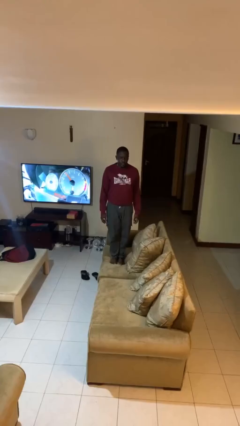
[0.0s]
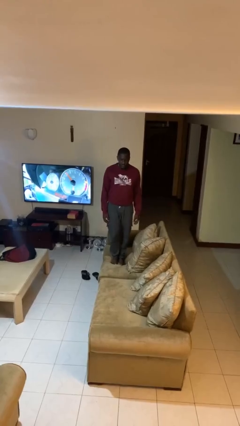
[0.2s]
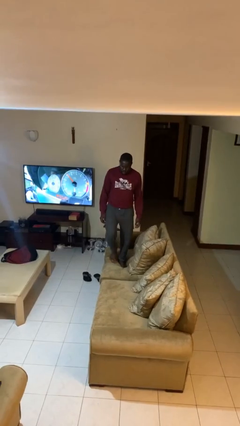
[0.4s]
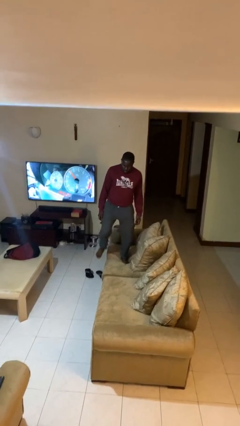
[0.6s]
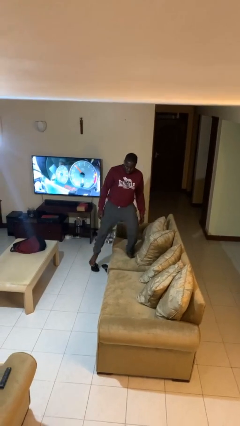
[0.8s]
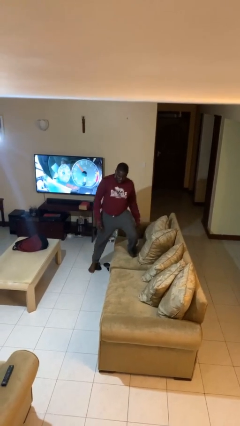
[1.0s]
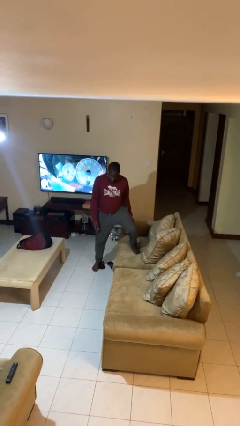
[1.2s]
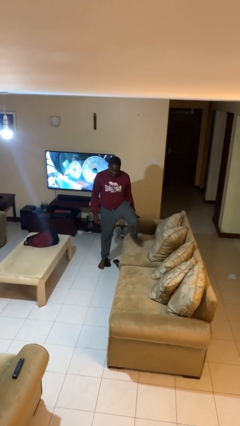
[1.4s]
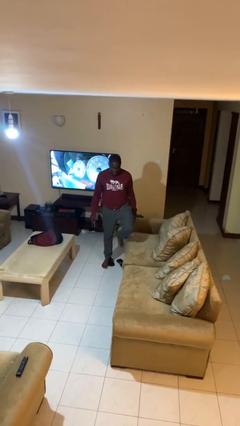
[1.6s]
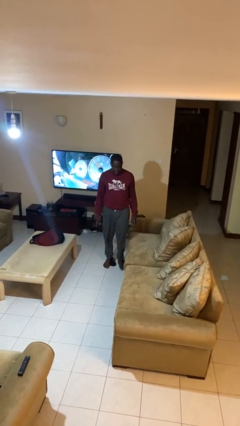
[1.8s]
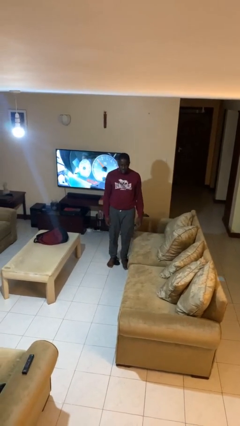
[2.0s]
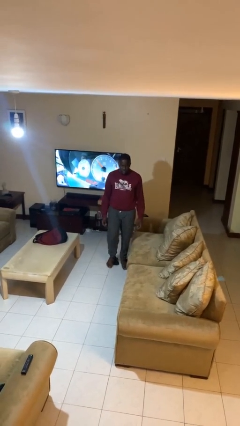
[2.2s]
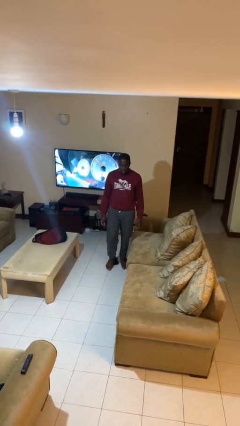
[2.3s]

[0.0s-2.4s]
person climbs off couch

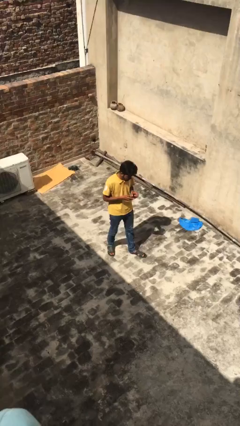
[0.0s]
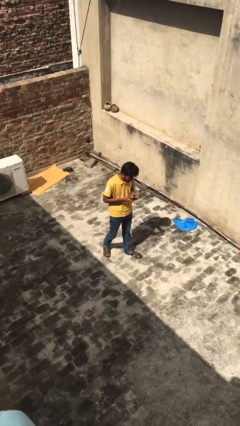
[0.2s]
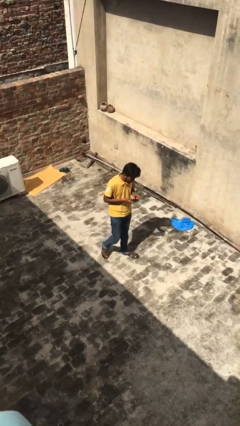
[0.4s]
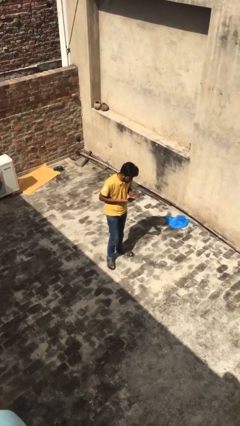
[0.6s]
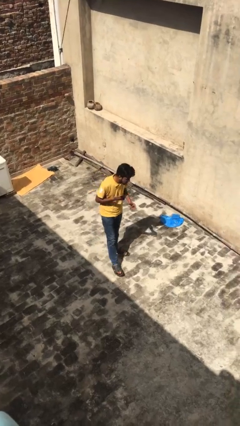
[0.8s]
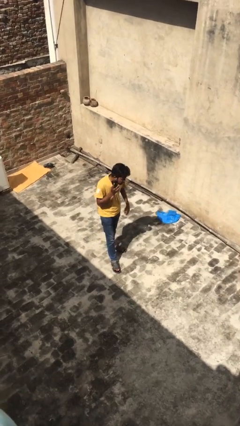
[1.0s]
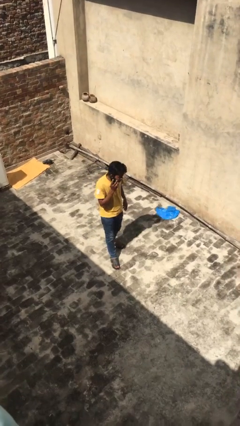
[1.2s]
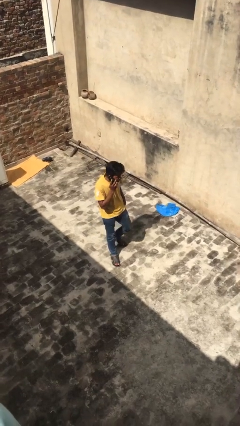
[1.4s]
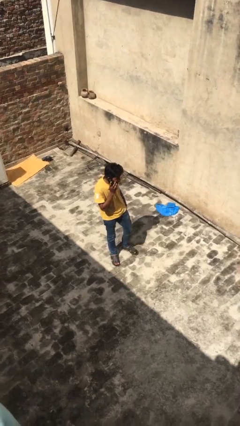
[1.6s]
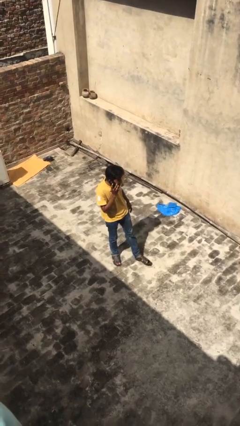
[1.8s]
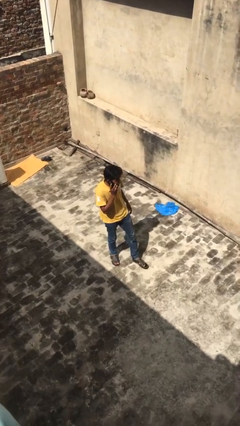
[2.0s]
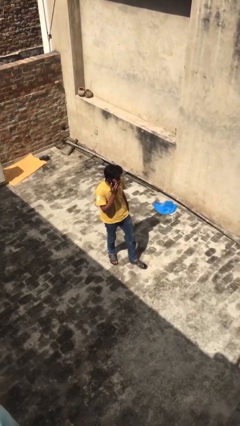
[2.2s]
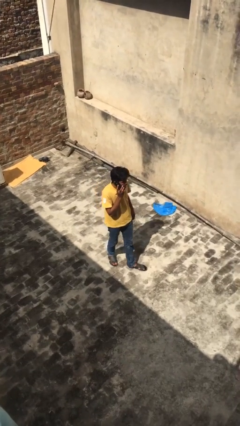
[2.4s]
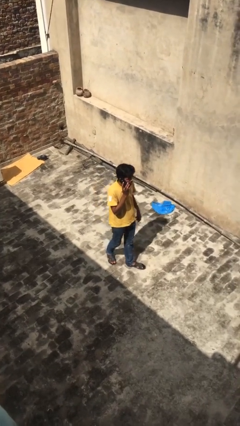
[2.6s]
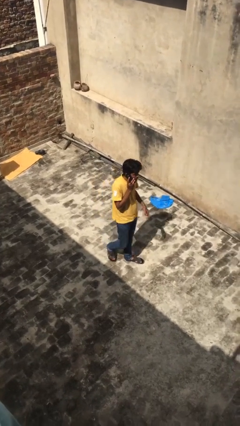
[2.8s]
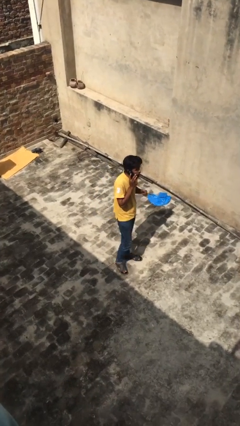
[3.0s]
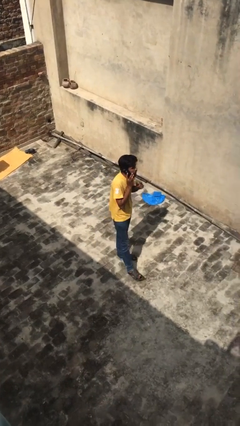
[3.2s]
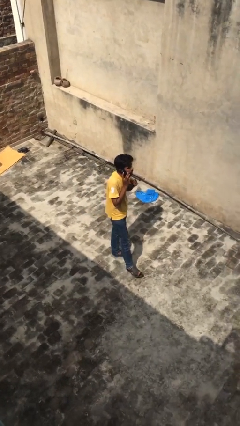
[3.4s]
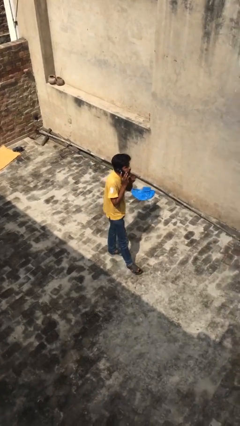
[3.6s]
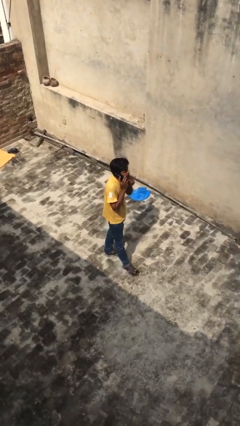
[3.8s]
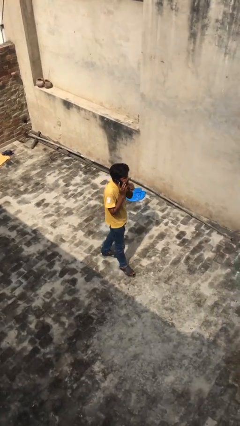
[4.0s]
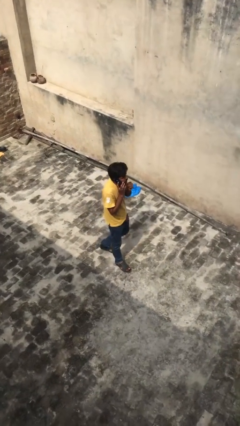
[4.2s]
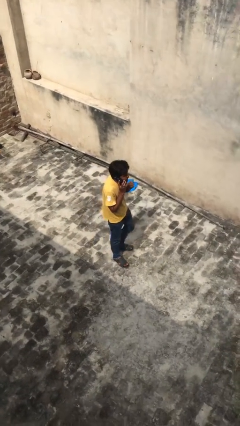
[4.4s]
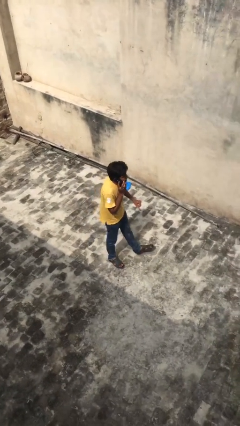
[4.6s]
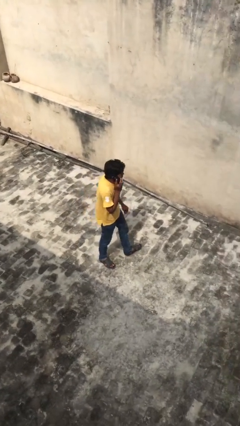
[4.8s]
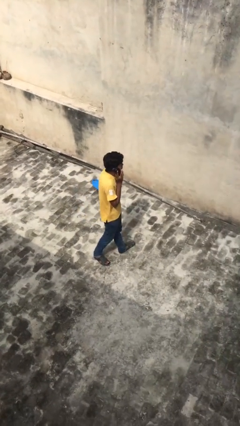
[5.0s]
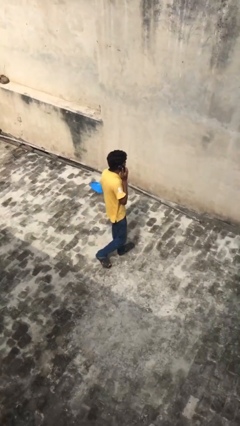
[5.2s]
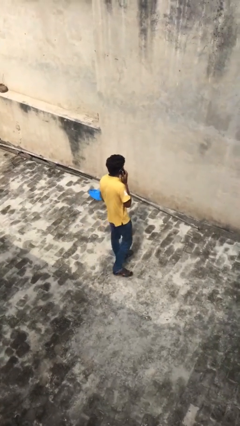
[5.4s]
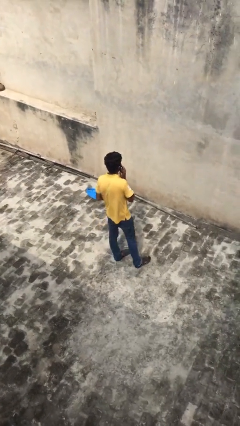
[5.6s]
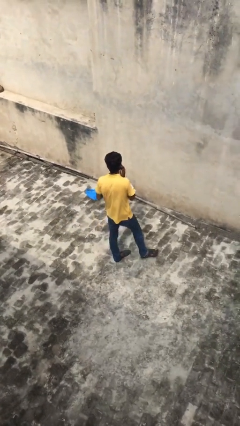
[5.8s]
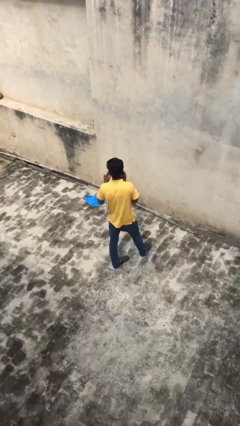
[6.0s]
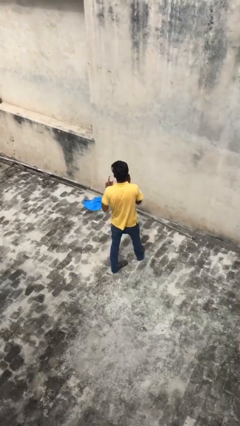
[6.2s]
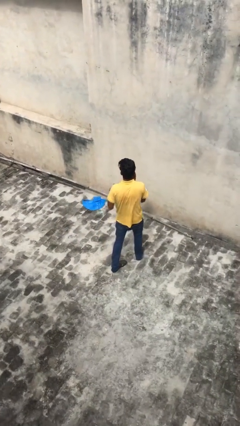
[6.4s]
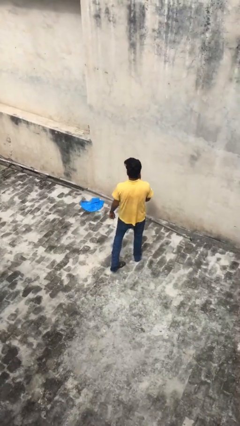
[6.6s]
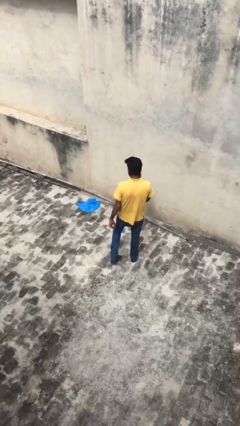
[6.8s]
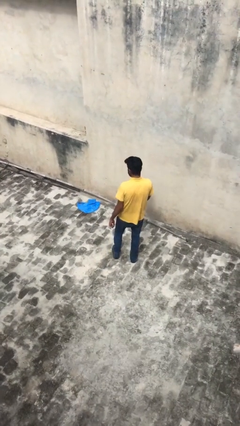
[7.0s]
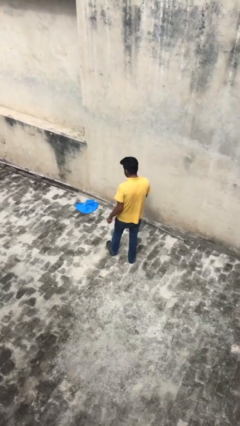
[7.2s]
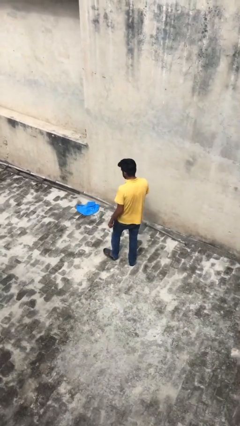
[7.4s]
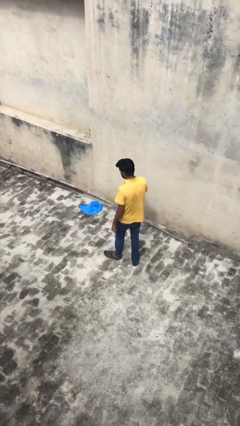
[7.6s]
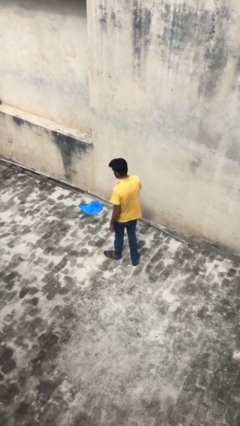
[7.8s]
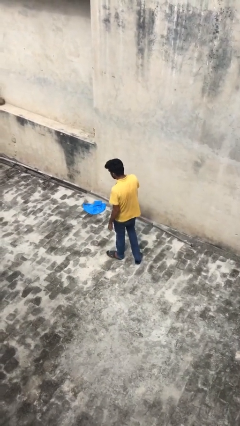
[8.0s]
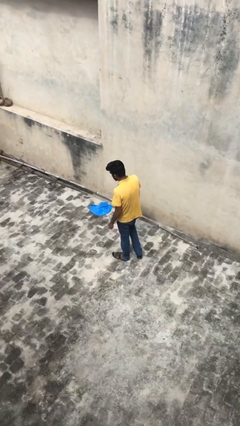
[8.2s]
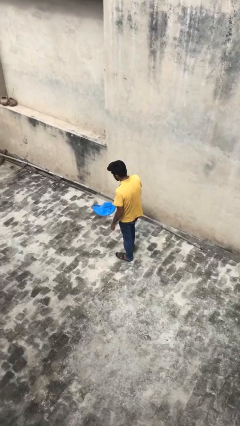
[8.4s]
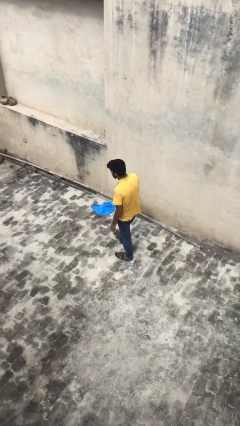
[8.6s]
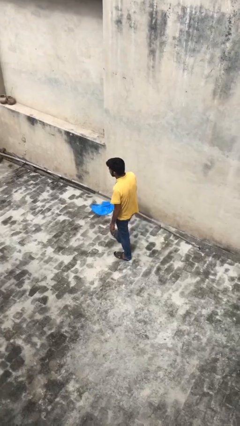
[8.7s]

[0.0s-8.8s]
person talks on phone

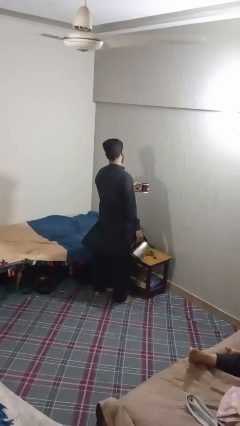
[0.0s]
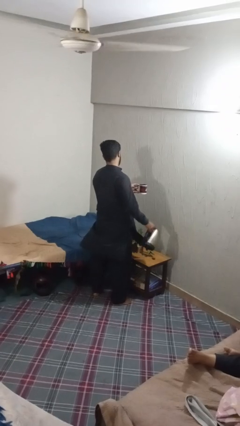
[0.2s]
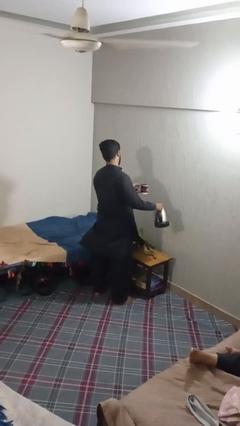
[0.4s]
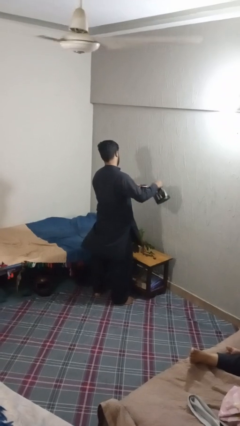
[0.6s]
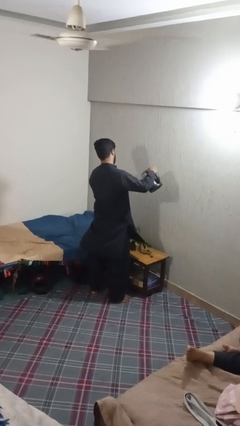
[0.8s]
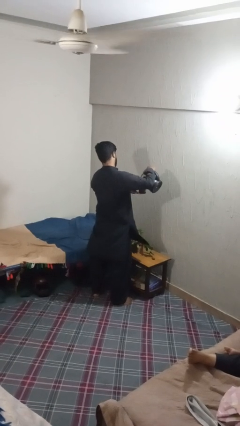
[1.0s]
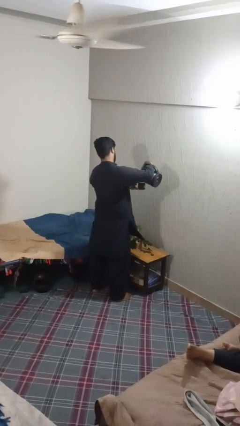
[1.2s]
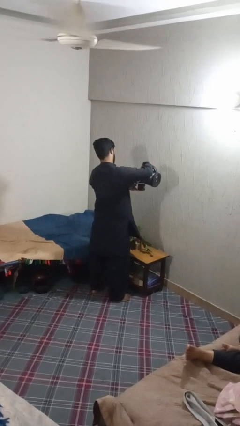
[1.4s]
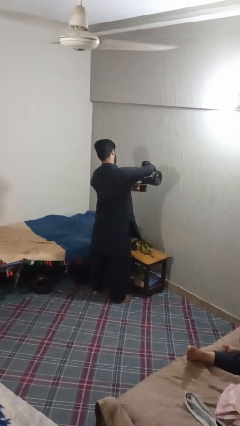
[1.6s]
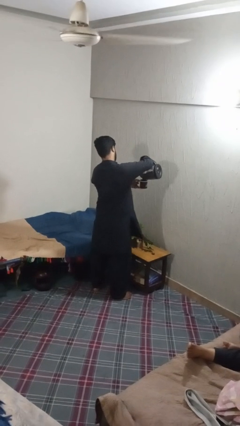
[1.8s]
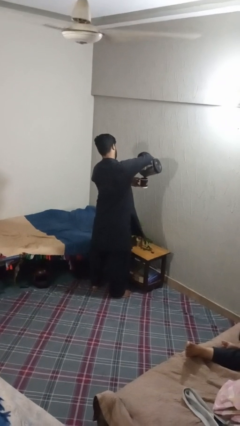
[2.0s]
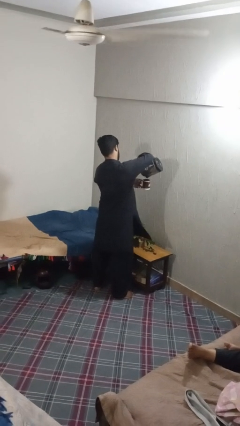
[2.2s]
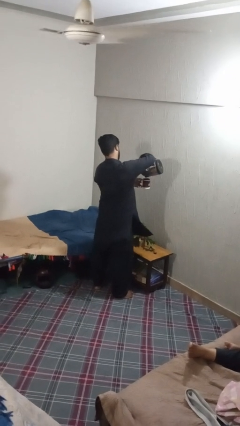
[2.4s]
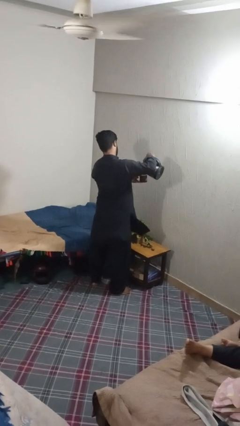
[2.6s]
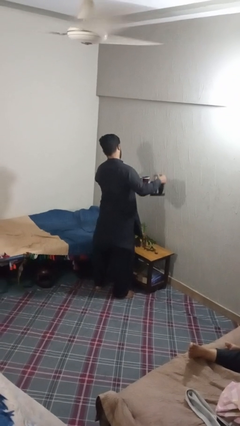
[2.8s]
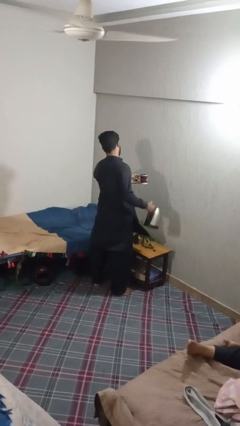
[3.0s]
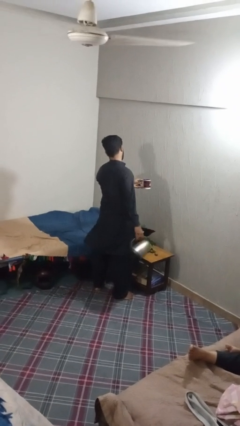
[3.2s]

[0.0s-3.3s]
person pours coffee into mug

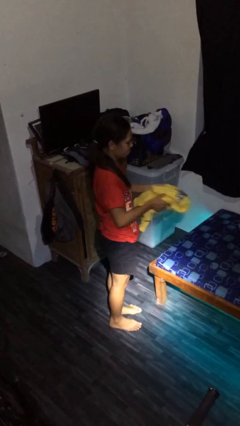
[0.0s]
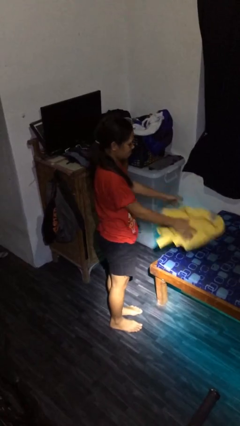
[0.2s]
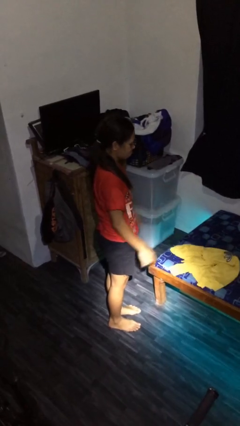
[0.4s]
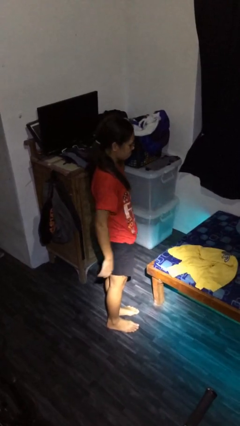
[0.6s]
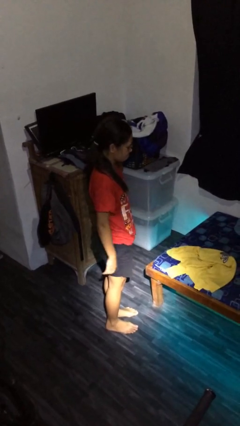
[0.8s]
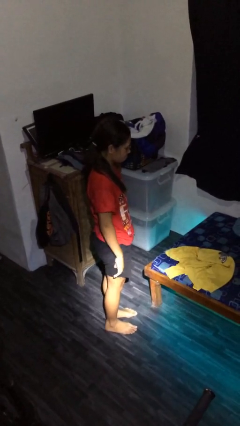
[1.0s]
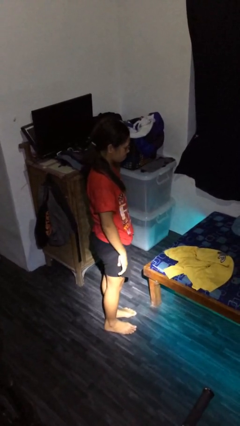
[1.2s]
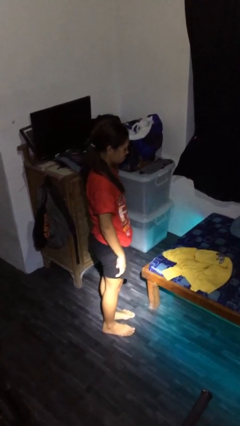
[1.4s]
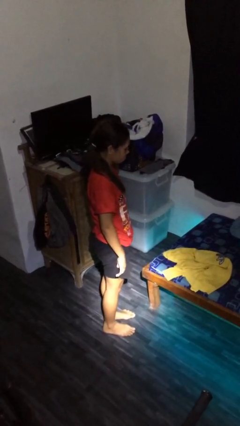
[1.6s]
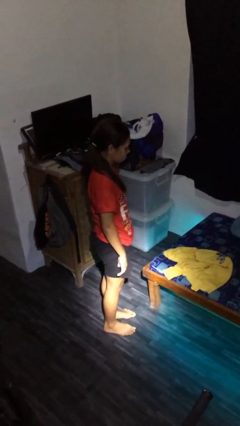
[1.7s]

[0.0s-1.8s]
person throws object on bed

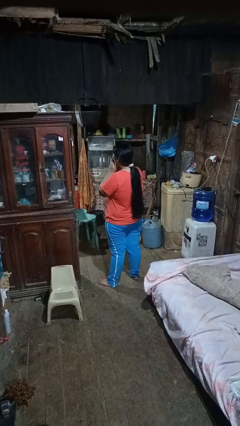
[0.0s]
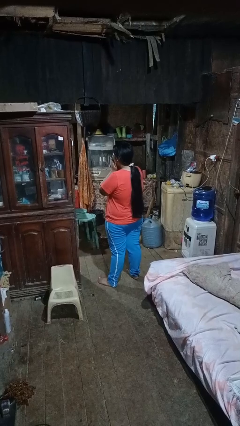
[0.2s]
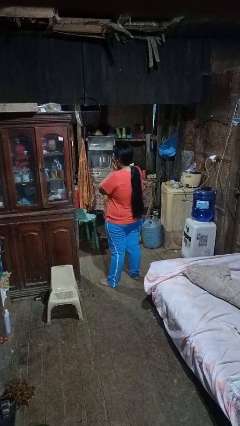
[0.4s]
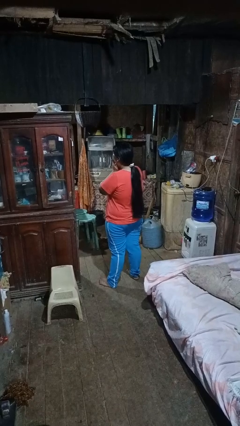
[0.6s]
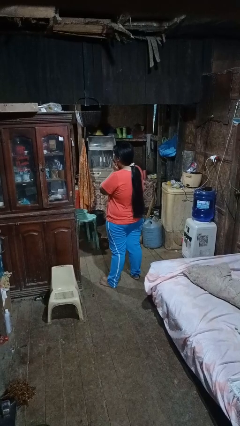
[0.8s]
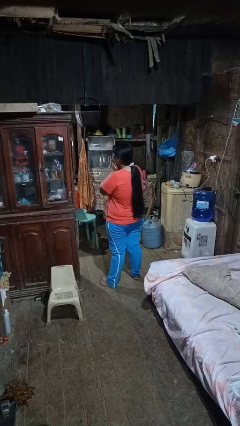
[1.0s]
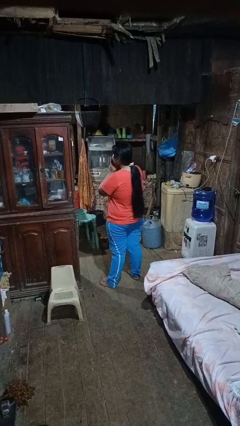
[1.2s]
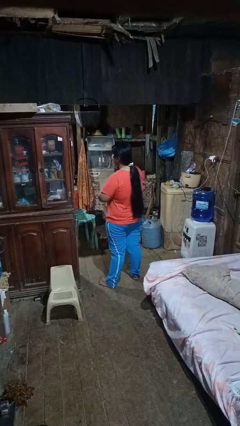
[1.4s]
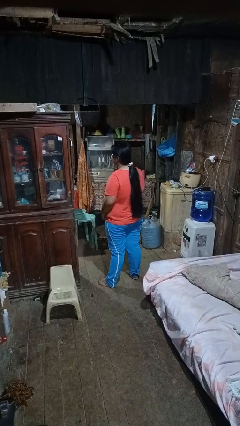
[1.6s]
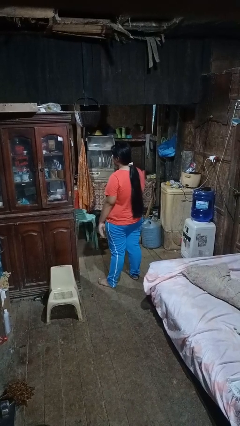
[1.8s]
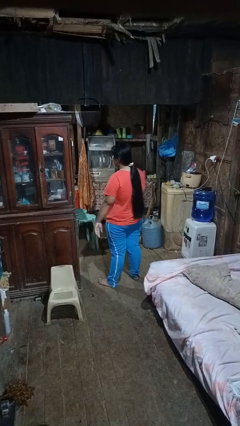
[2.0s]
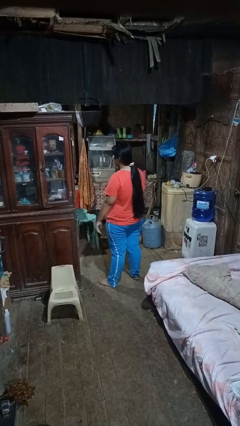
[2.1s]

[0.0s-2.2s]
person yawns
